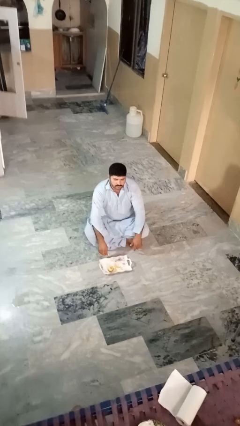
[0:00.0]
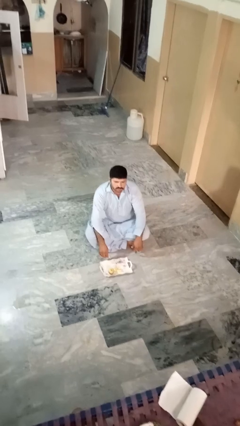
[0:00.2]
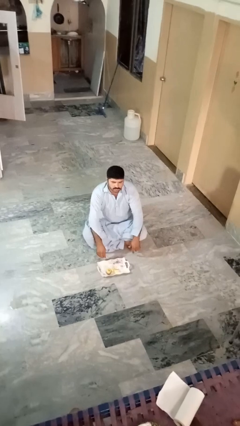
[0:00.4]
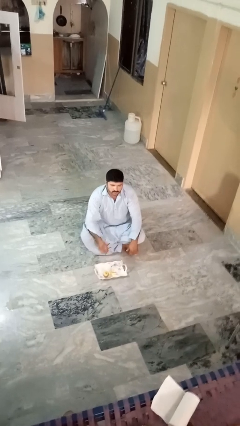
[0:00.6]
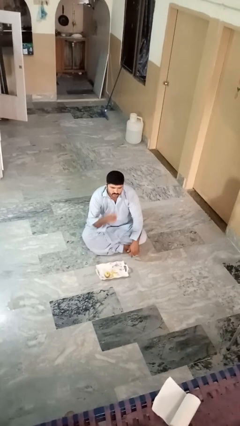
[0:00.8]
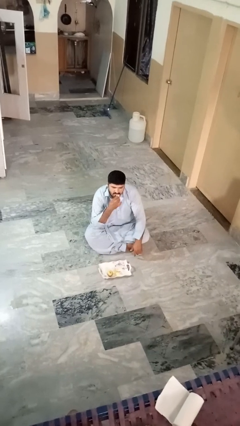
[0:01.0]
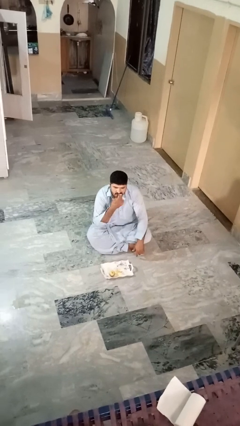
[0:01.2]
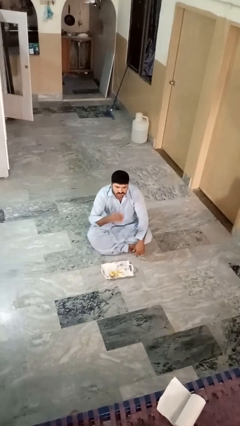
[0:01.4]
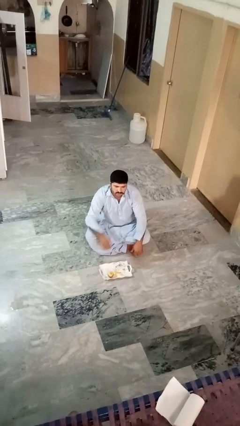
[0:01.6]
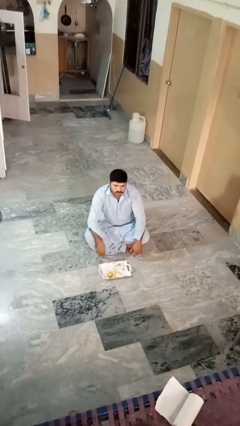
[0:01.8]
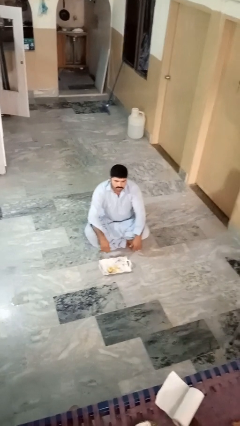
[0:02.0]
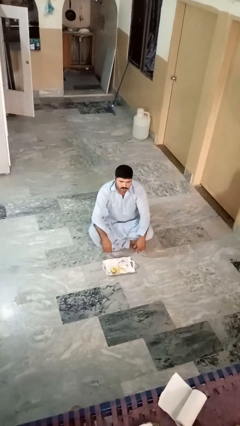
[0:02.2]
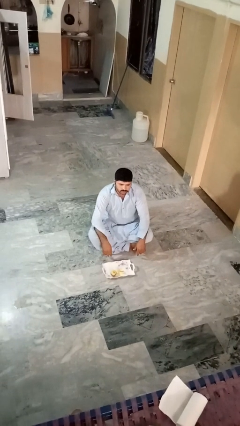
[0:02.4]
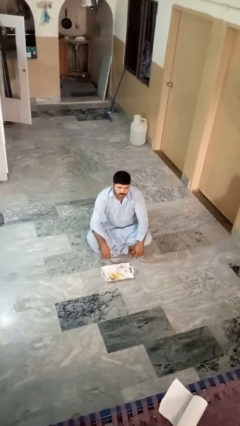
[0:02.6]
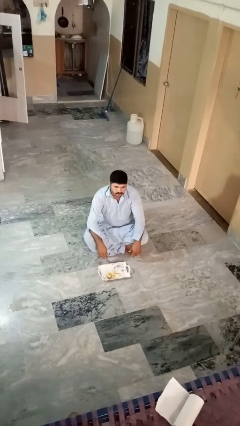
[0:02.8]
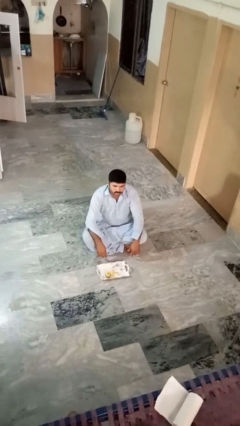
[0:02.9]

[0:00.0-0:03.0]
person eats apple

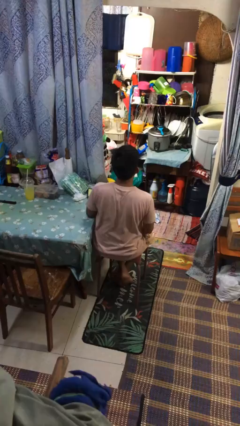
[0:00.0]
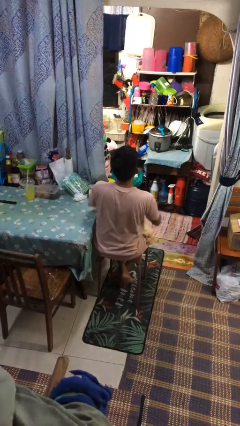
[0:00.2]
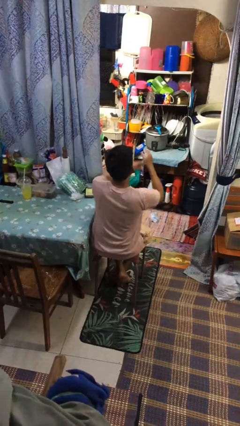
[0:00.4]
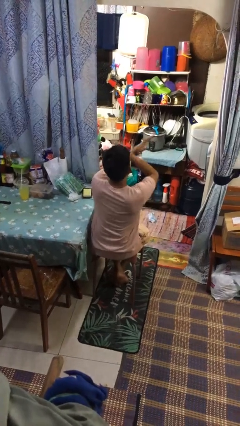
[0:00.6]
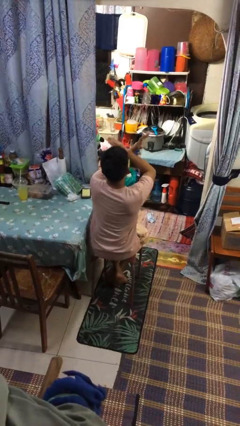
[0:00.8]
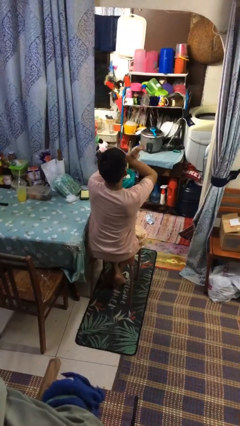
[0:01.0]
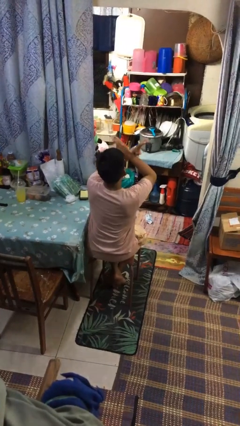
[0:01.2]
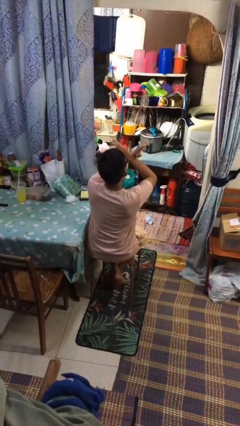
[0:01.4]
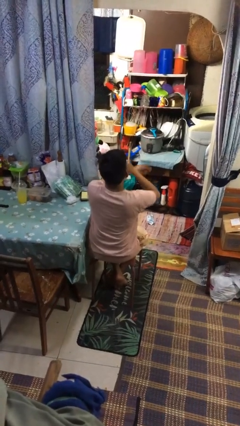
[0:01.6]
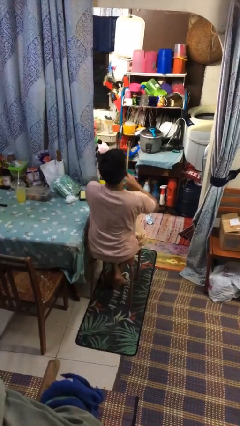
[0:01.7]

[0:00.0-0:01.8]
person gestures arms x

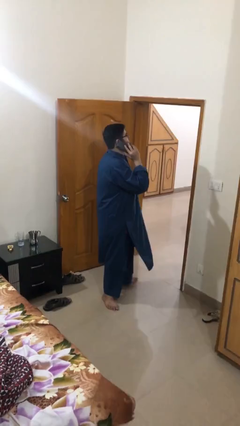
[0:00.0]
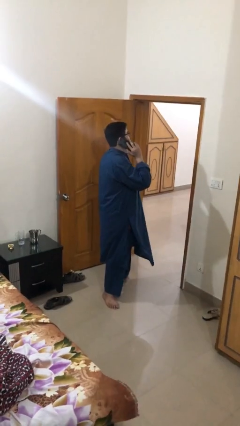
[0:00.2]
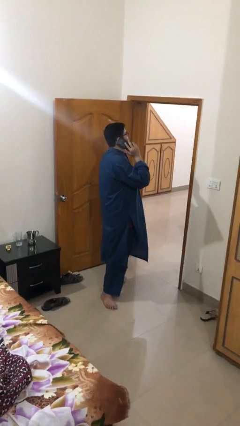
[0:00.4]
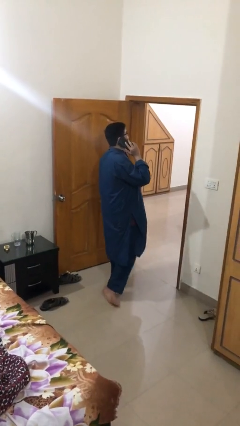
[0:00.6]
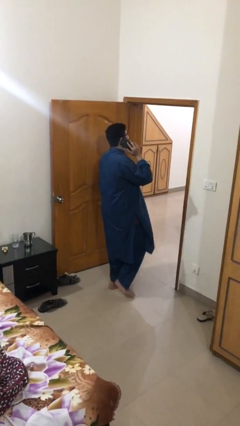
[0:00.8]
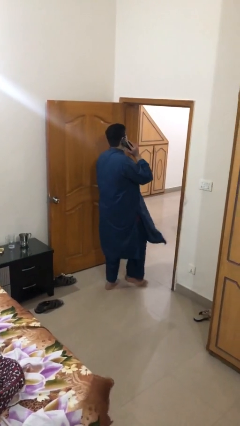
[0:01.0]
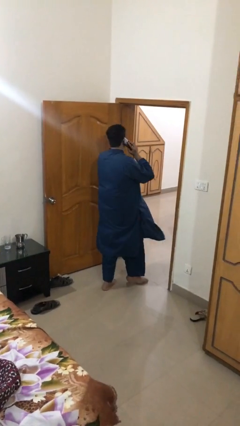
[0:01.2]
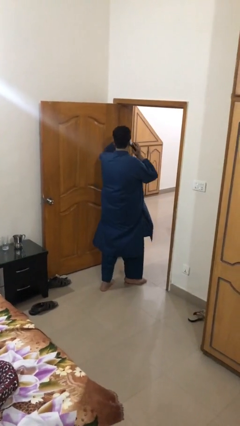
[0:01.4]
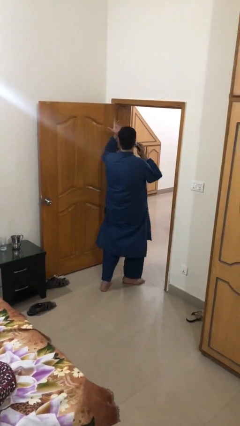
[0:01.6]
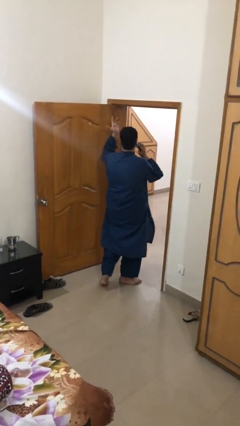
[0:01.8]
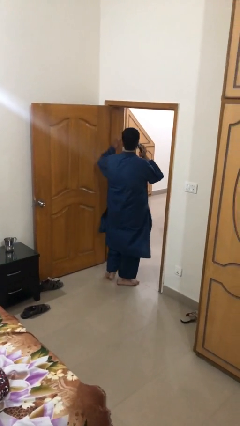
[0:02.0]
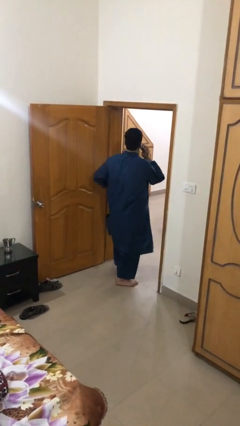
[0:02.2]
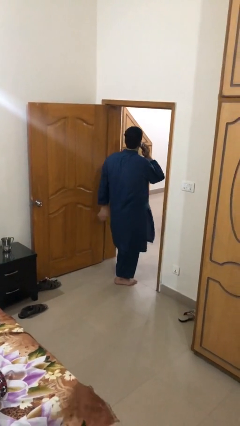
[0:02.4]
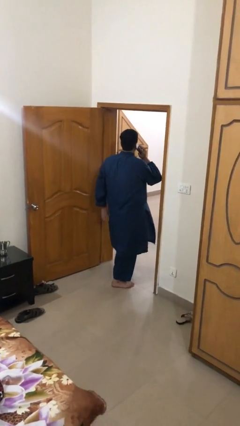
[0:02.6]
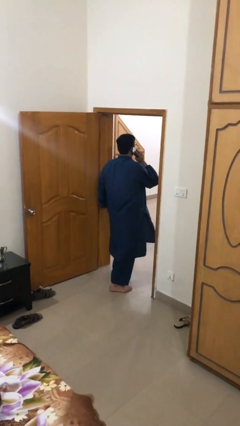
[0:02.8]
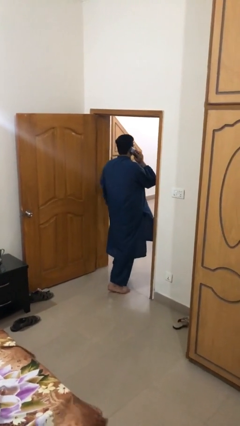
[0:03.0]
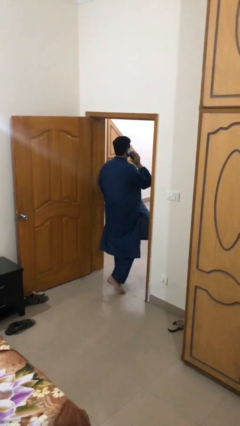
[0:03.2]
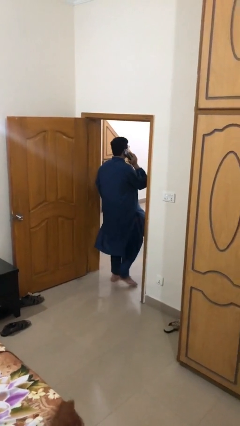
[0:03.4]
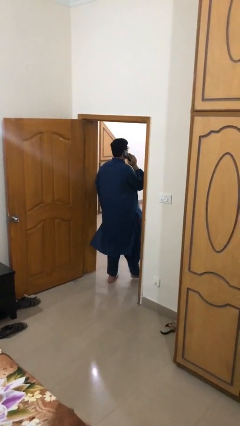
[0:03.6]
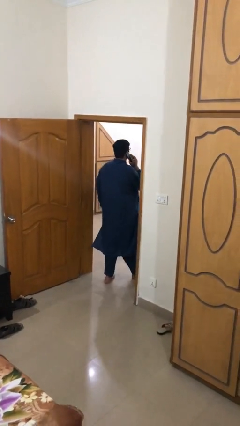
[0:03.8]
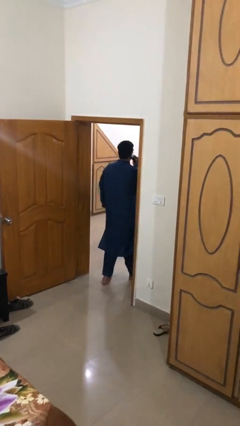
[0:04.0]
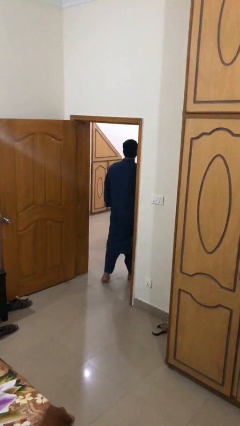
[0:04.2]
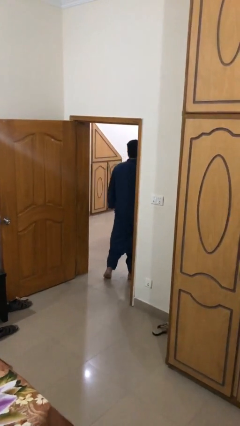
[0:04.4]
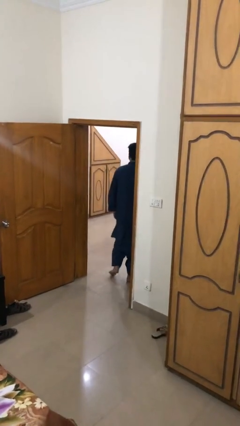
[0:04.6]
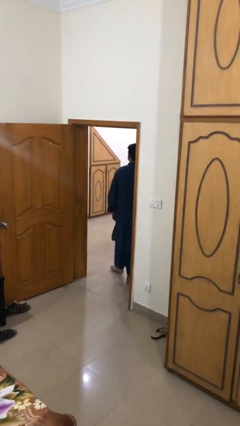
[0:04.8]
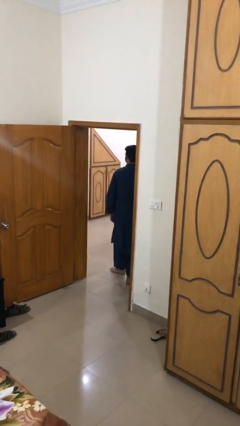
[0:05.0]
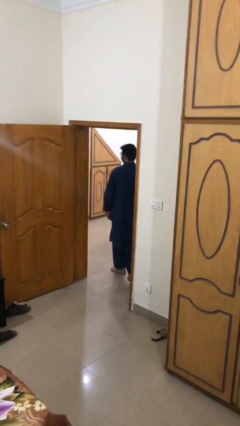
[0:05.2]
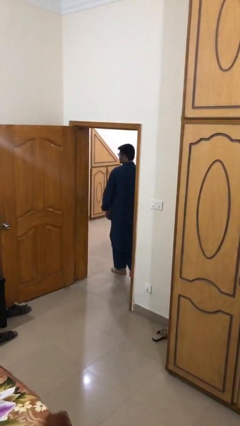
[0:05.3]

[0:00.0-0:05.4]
person exits scene through structure

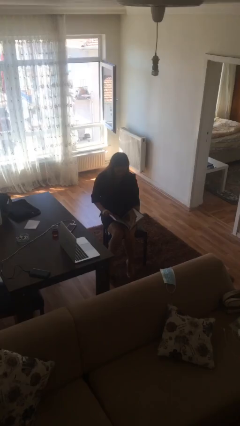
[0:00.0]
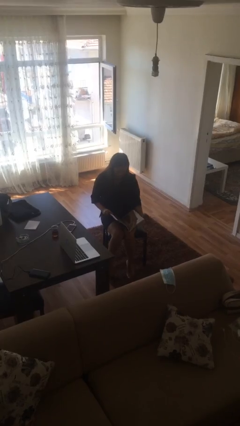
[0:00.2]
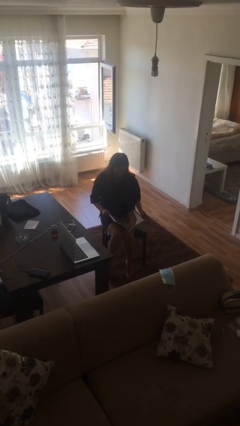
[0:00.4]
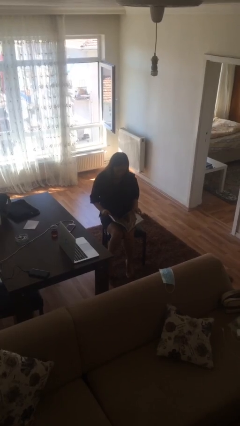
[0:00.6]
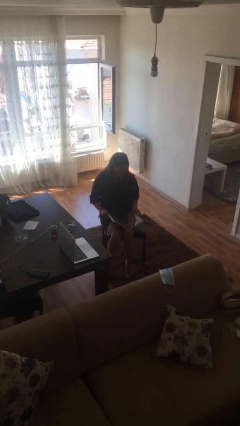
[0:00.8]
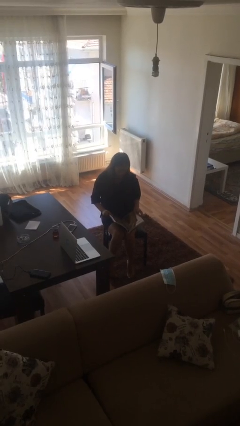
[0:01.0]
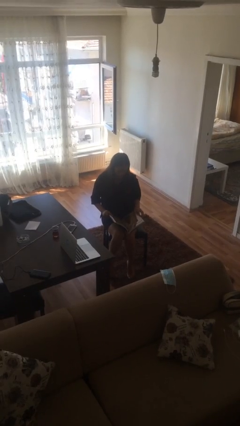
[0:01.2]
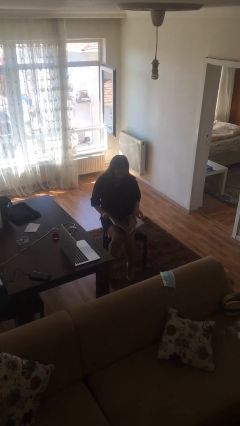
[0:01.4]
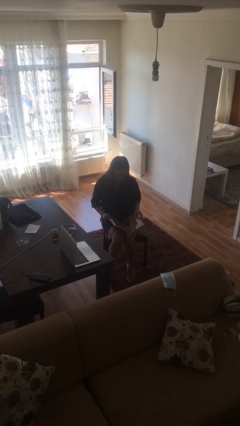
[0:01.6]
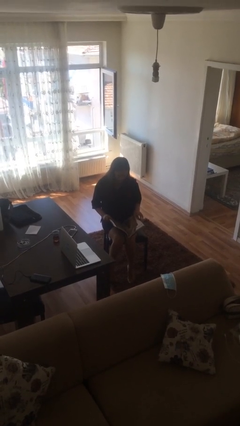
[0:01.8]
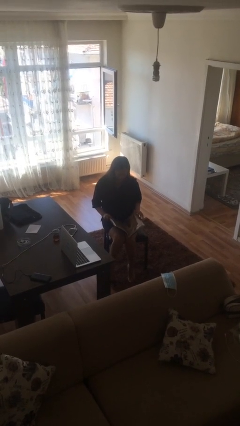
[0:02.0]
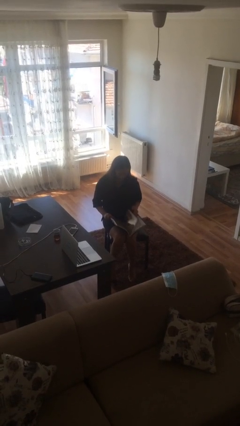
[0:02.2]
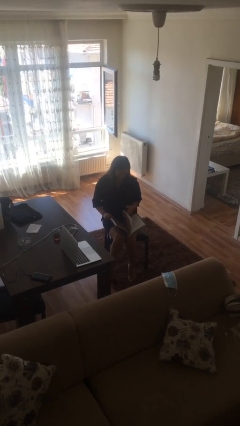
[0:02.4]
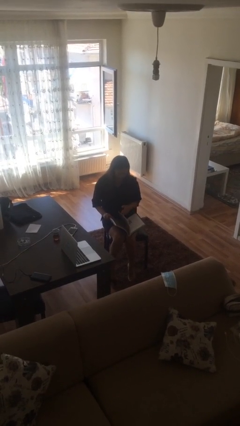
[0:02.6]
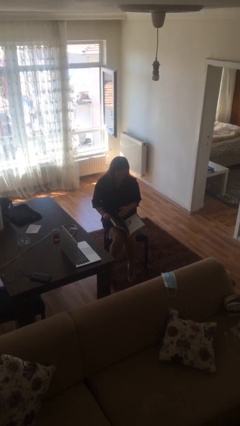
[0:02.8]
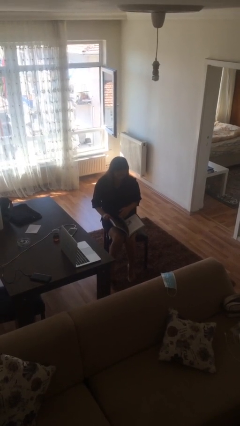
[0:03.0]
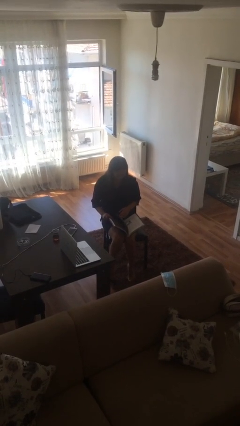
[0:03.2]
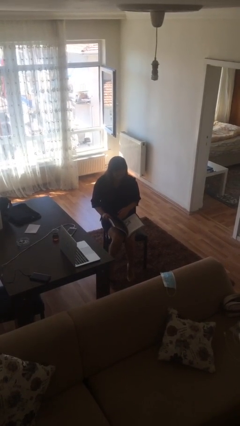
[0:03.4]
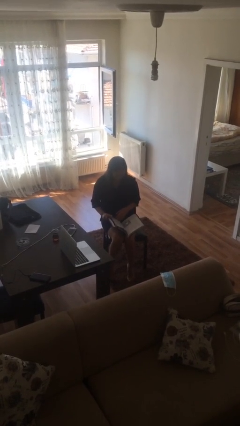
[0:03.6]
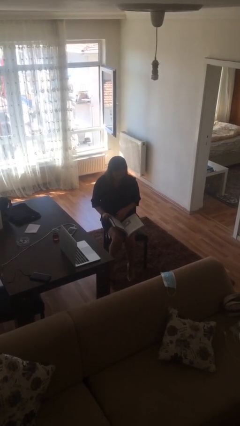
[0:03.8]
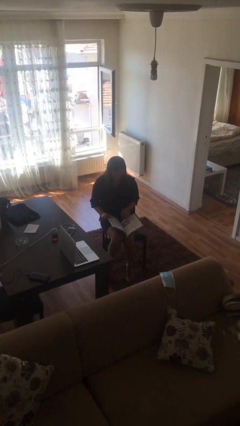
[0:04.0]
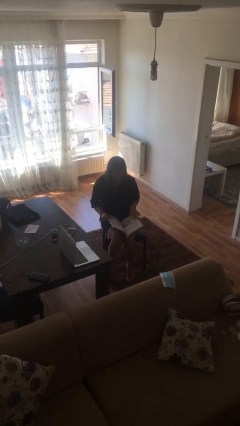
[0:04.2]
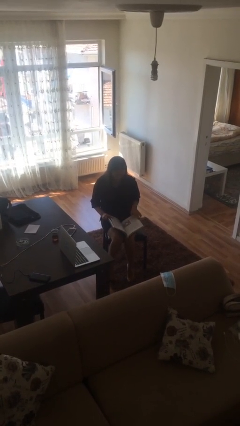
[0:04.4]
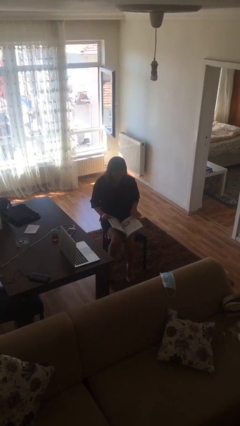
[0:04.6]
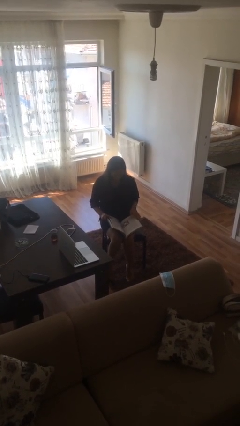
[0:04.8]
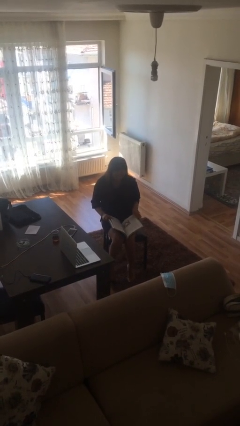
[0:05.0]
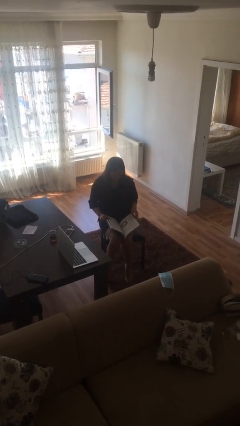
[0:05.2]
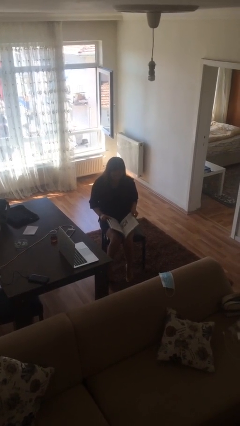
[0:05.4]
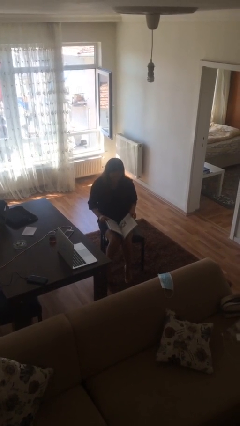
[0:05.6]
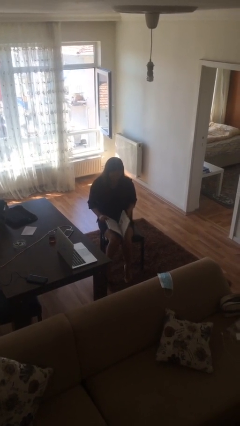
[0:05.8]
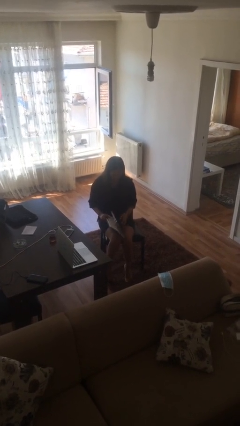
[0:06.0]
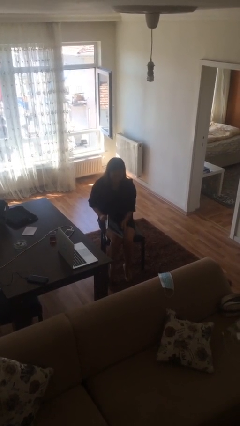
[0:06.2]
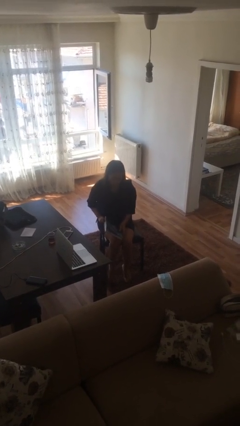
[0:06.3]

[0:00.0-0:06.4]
person reads document

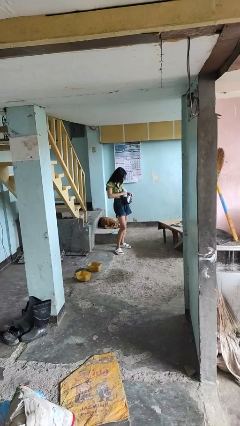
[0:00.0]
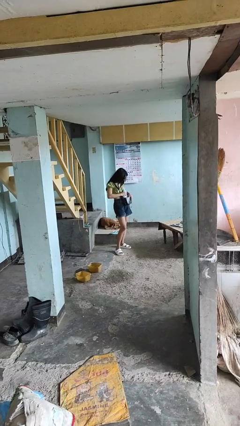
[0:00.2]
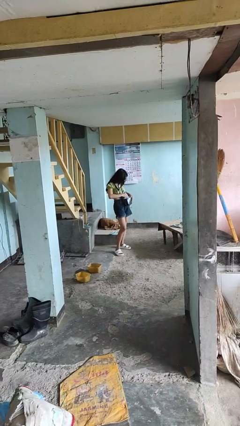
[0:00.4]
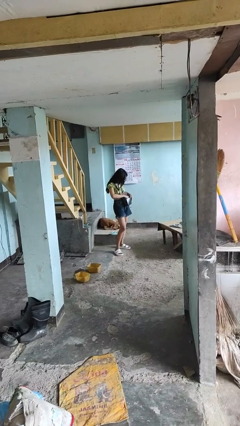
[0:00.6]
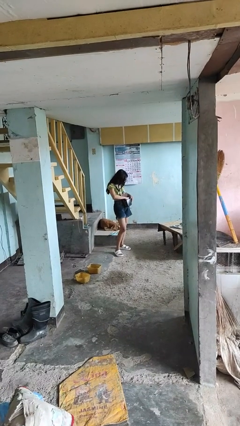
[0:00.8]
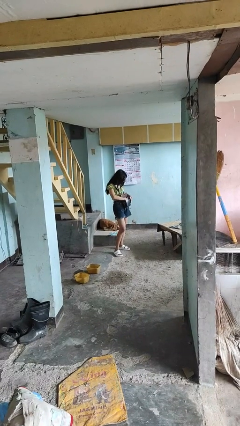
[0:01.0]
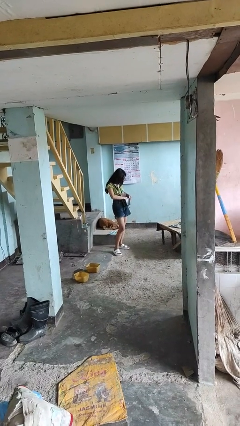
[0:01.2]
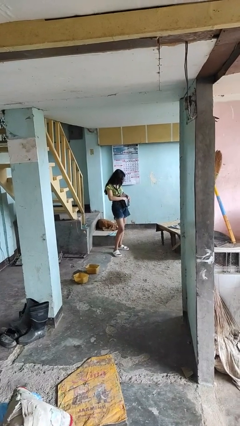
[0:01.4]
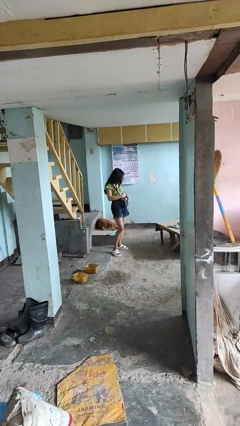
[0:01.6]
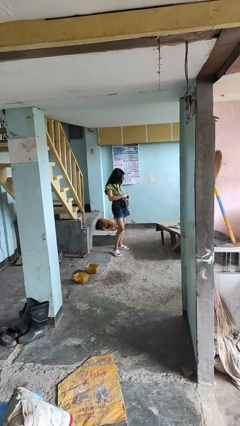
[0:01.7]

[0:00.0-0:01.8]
person puts object into purse
